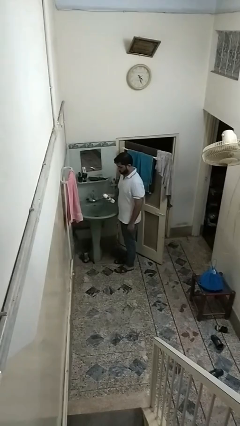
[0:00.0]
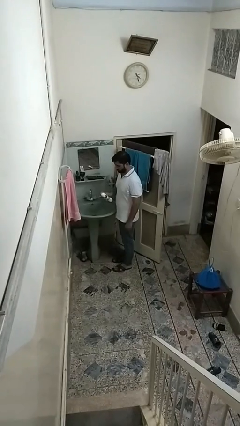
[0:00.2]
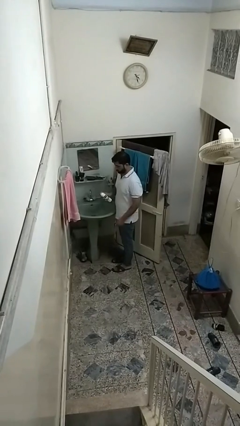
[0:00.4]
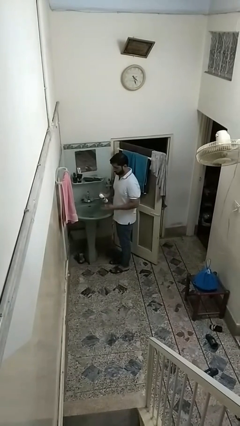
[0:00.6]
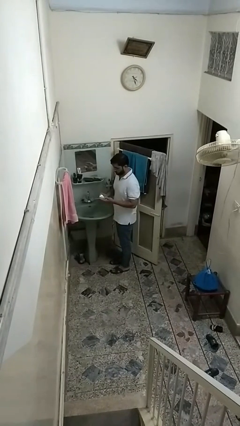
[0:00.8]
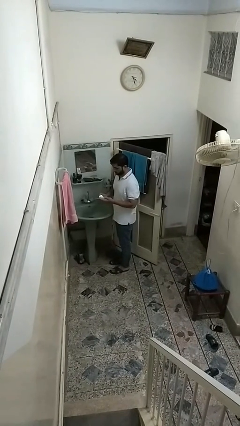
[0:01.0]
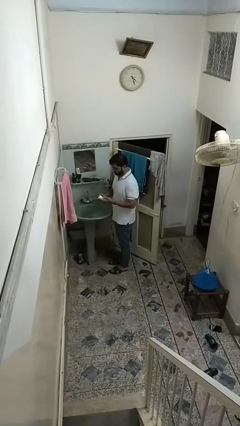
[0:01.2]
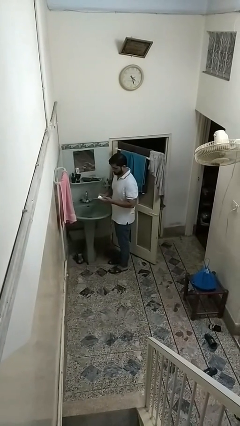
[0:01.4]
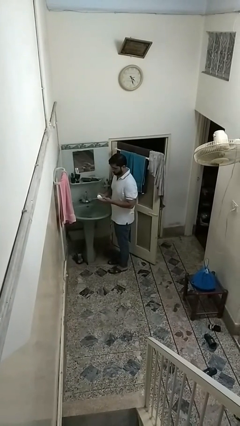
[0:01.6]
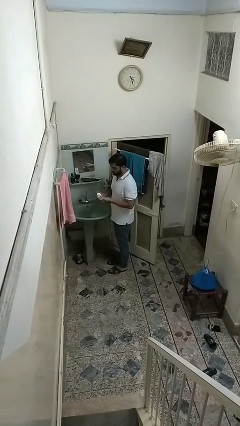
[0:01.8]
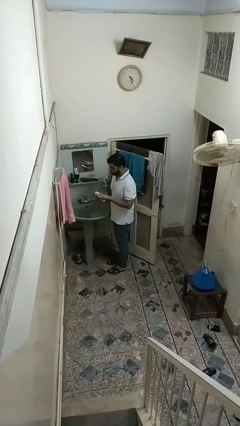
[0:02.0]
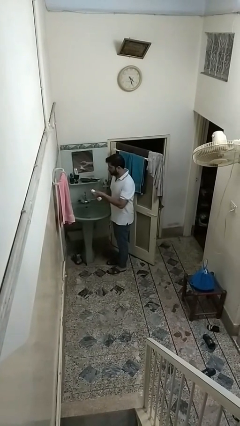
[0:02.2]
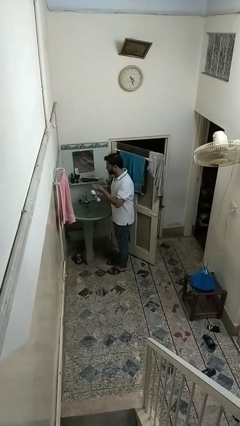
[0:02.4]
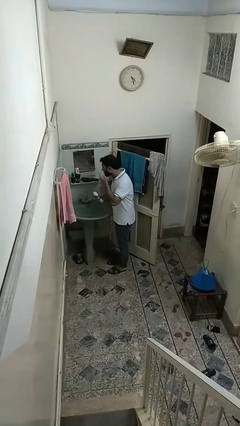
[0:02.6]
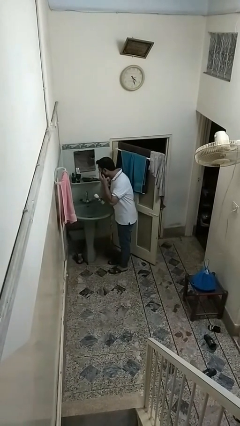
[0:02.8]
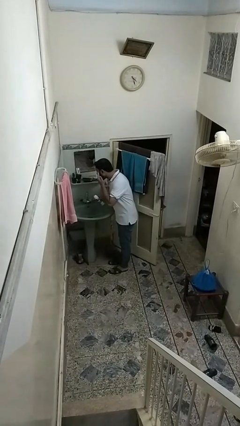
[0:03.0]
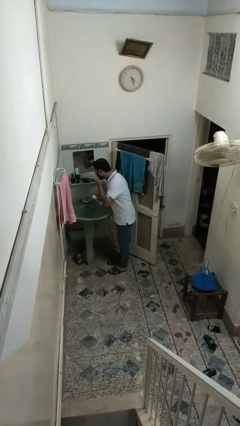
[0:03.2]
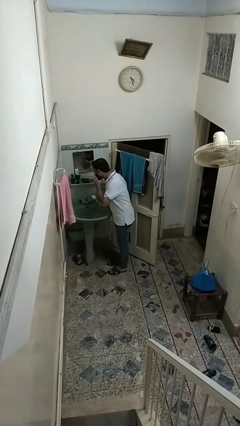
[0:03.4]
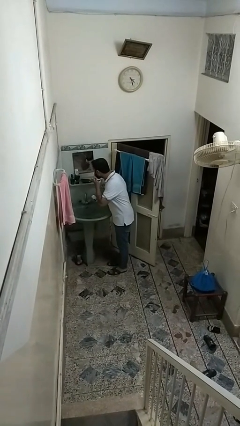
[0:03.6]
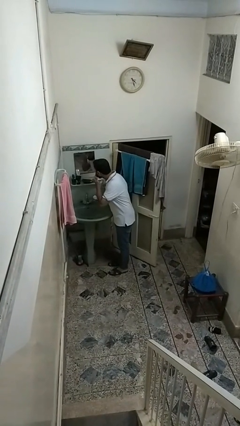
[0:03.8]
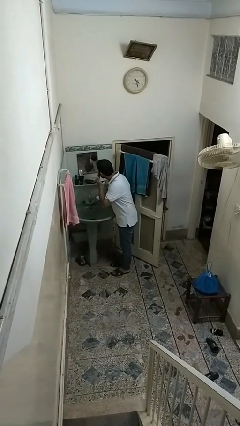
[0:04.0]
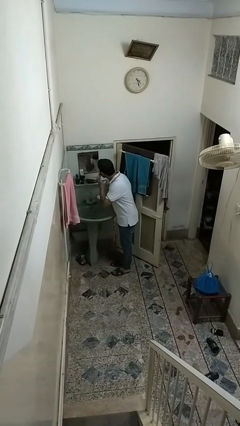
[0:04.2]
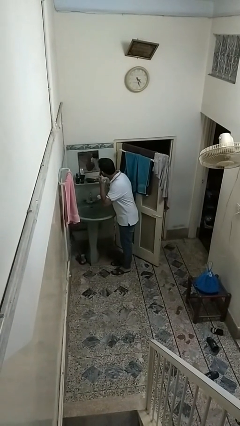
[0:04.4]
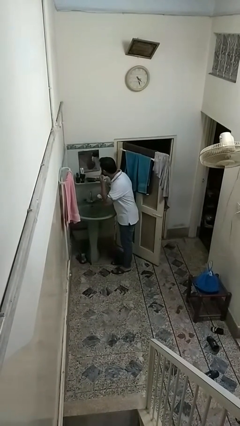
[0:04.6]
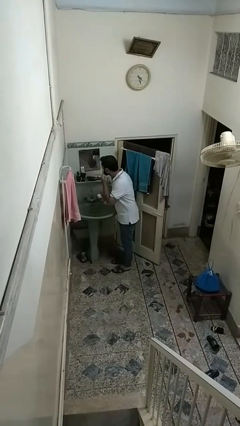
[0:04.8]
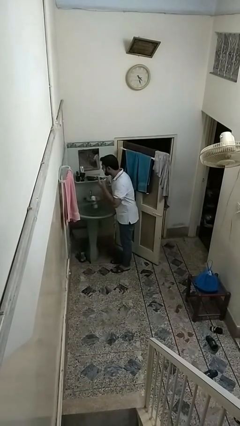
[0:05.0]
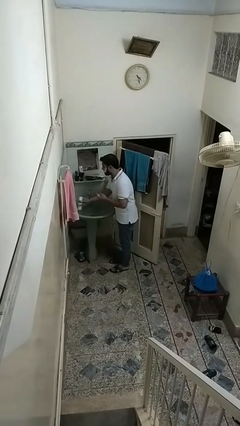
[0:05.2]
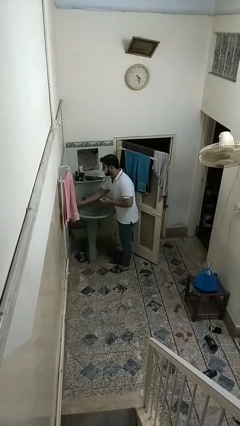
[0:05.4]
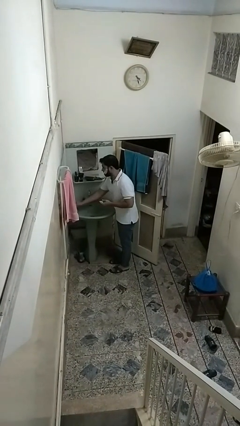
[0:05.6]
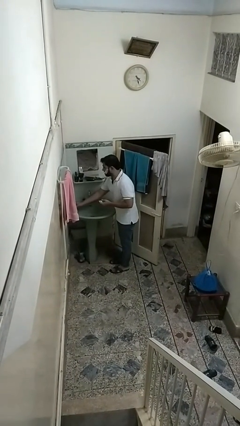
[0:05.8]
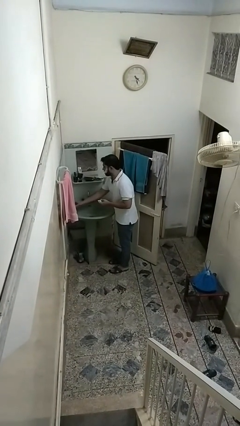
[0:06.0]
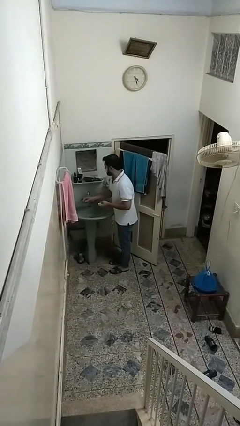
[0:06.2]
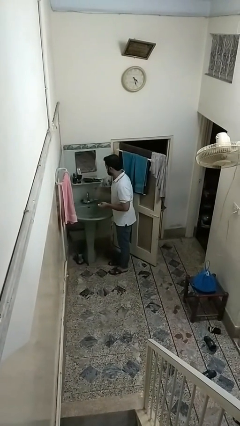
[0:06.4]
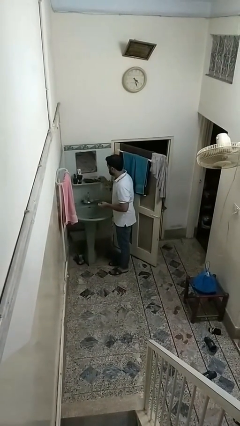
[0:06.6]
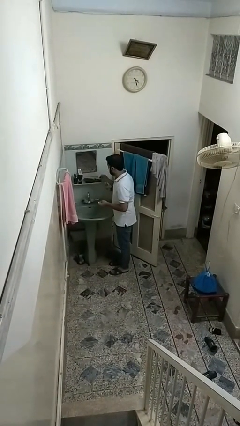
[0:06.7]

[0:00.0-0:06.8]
person applies shaving cream

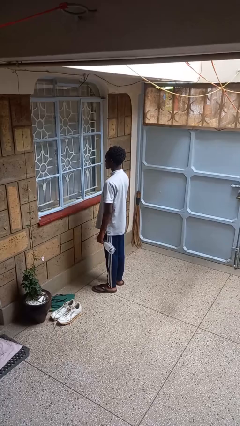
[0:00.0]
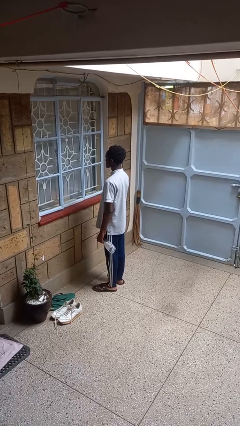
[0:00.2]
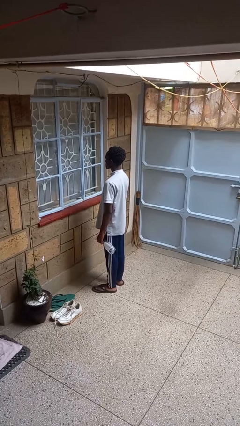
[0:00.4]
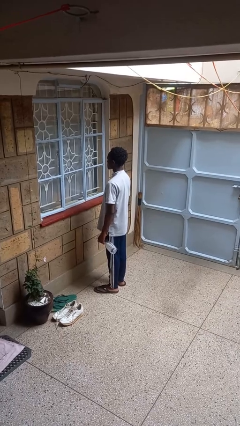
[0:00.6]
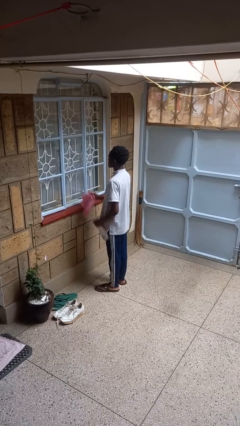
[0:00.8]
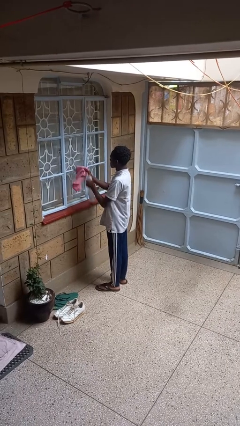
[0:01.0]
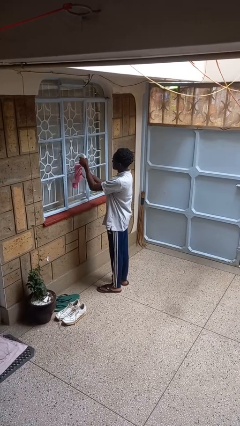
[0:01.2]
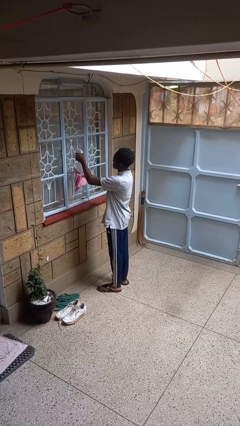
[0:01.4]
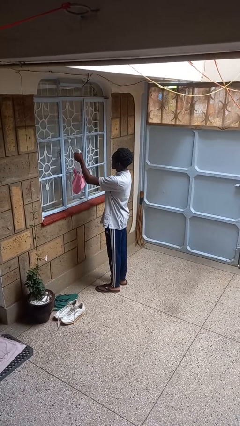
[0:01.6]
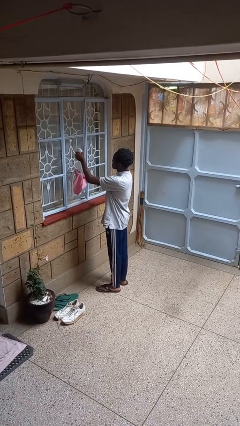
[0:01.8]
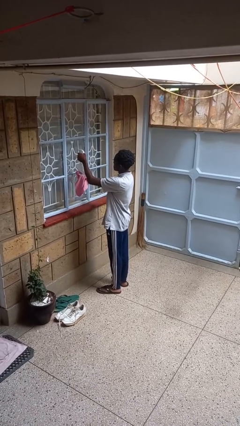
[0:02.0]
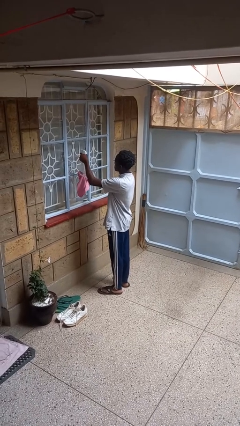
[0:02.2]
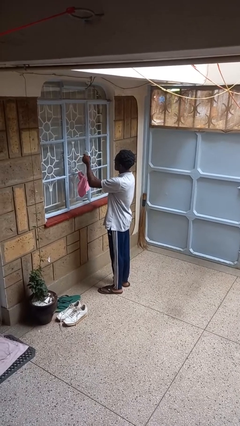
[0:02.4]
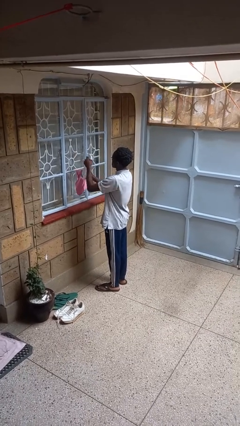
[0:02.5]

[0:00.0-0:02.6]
person sprays from bottle

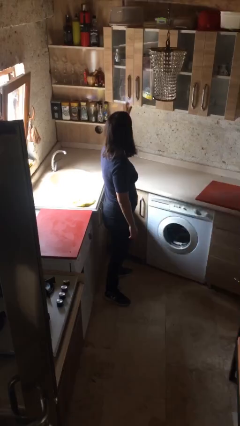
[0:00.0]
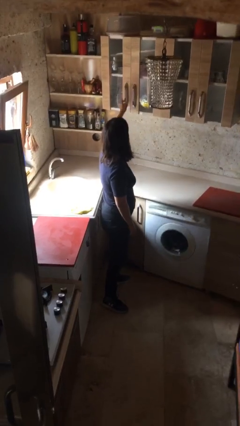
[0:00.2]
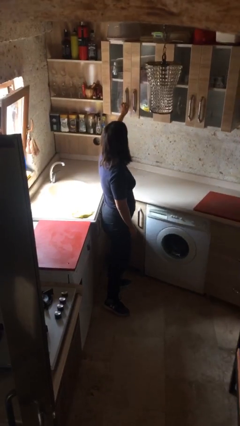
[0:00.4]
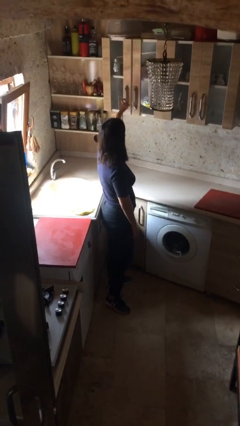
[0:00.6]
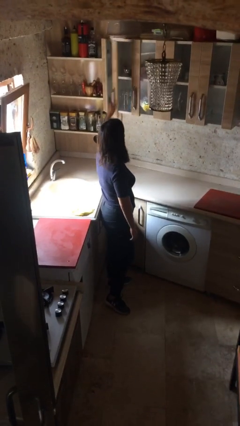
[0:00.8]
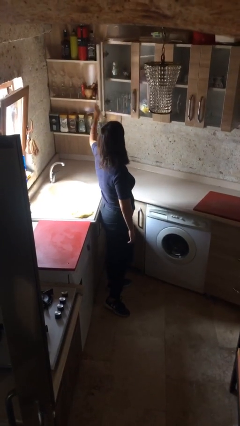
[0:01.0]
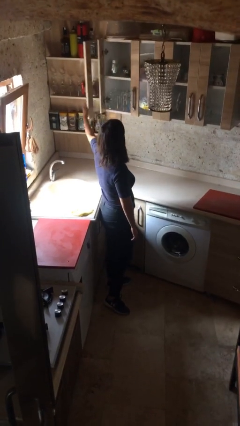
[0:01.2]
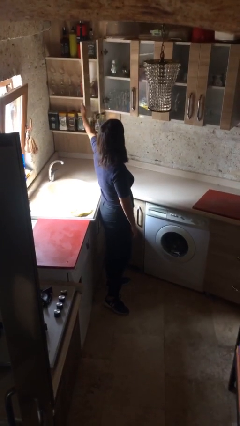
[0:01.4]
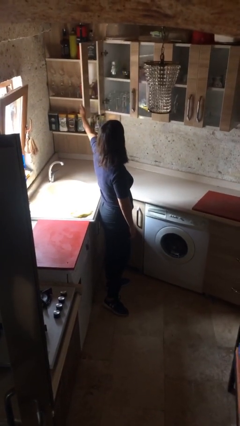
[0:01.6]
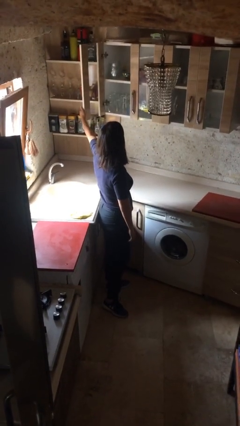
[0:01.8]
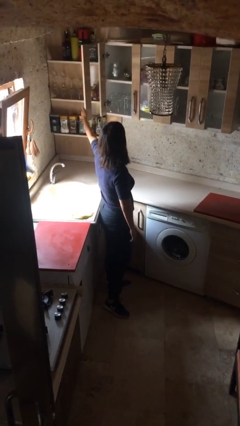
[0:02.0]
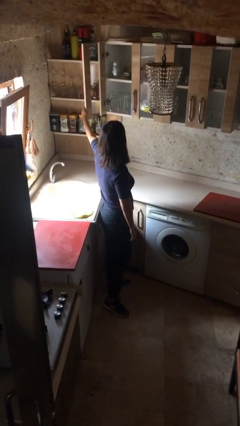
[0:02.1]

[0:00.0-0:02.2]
person opens cabinet

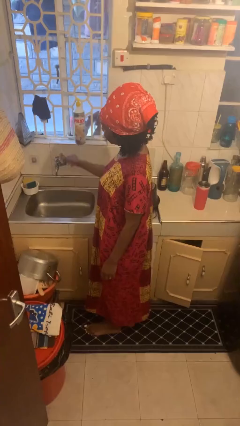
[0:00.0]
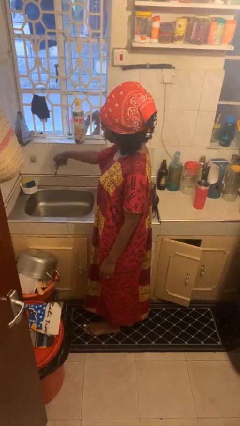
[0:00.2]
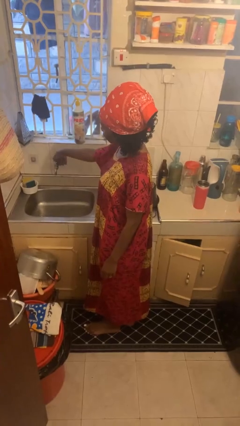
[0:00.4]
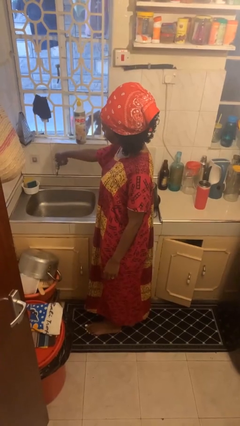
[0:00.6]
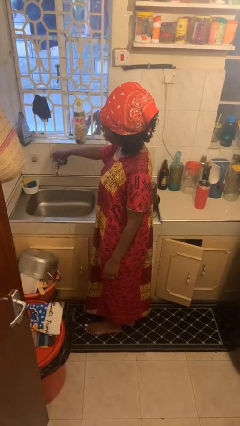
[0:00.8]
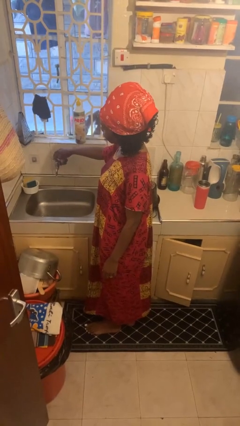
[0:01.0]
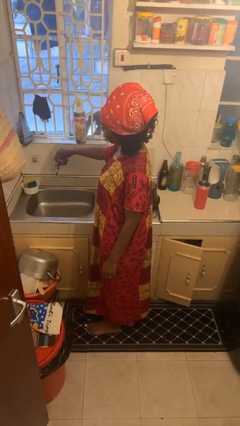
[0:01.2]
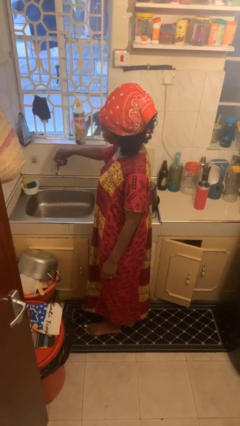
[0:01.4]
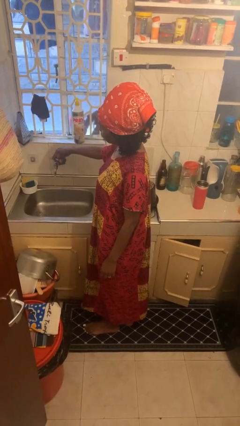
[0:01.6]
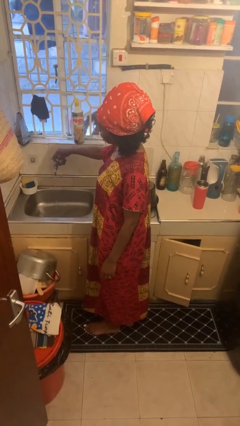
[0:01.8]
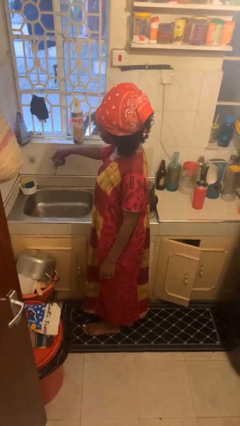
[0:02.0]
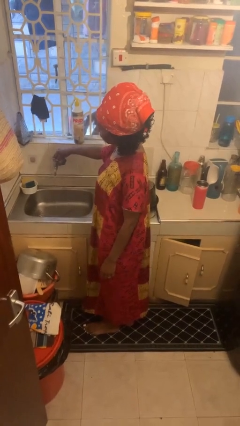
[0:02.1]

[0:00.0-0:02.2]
person turns on faucet

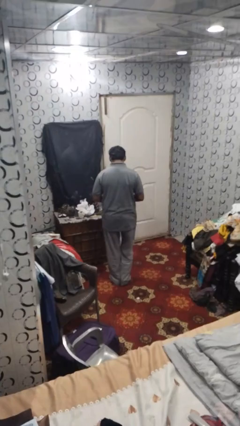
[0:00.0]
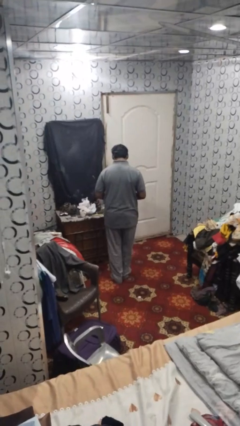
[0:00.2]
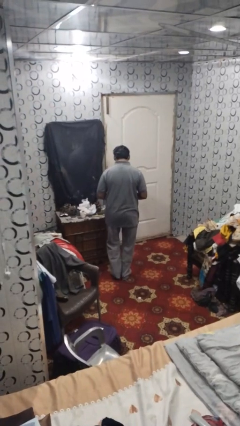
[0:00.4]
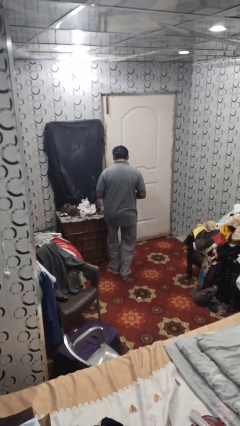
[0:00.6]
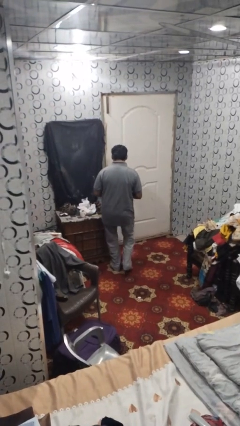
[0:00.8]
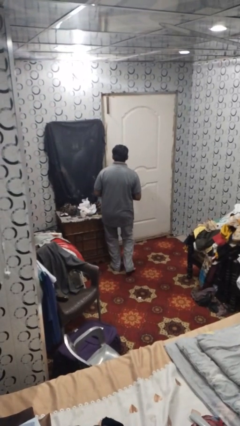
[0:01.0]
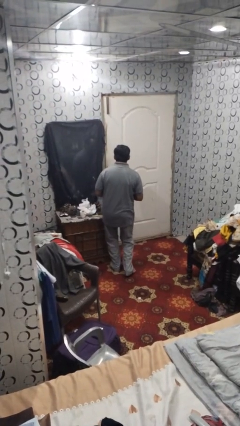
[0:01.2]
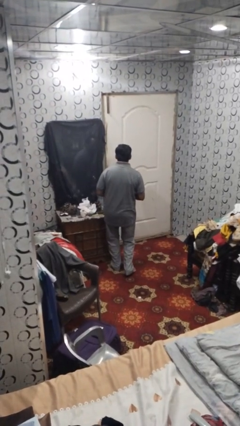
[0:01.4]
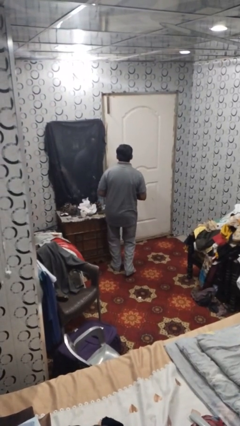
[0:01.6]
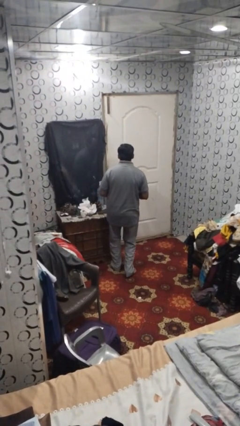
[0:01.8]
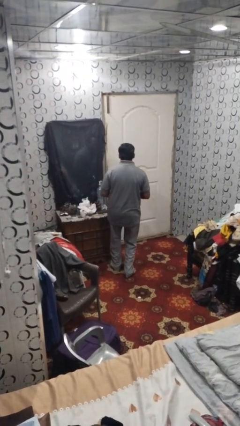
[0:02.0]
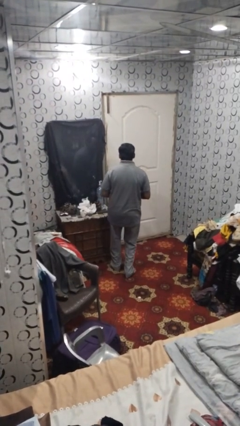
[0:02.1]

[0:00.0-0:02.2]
person bumps into table

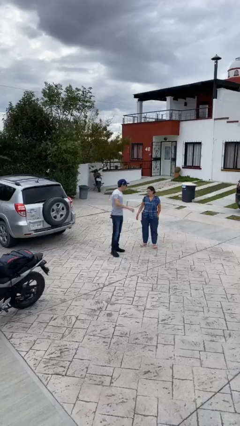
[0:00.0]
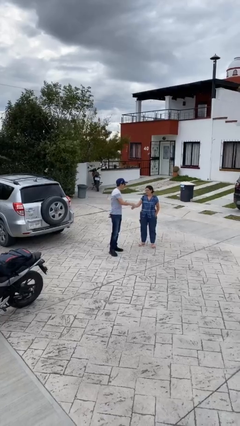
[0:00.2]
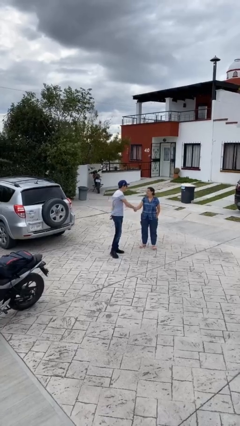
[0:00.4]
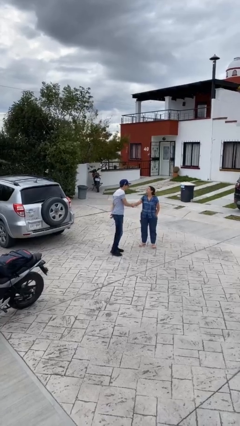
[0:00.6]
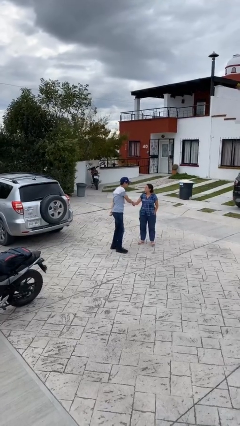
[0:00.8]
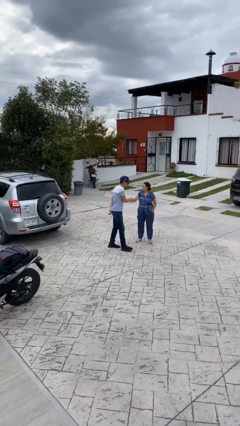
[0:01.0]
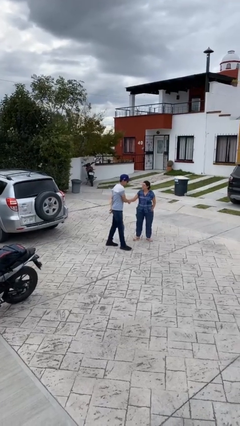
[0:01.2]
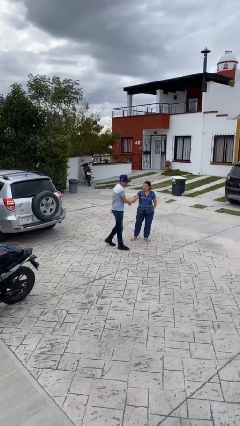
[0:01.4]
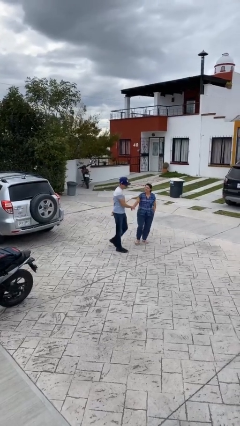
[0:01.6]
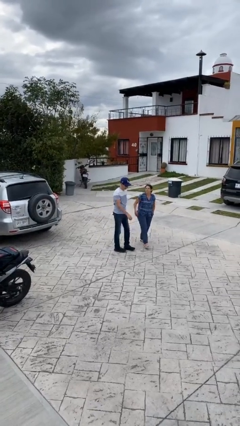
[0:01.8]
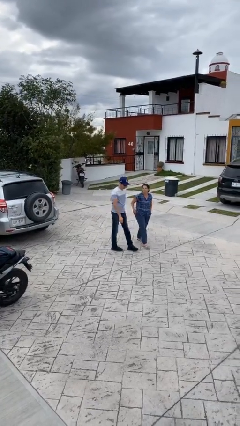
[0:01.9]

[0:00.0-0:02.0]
person shakes hand
